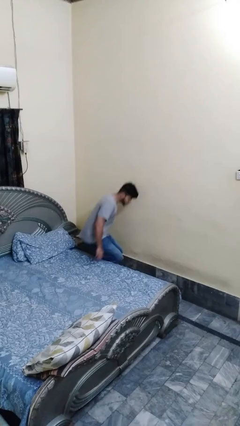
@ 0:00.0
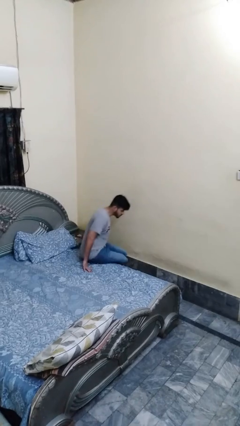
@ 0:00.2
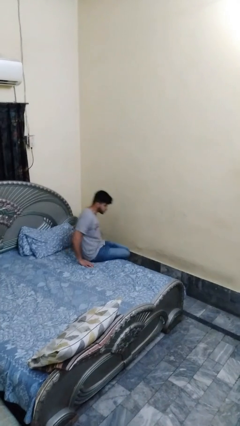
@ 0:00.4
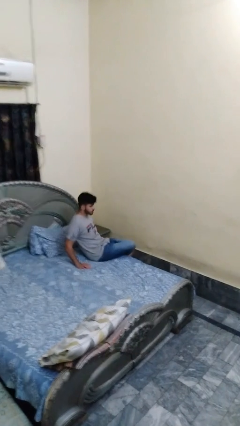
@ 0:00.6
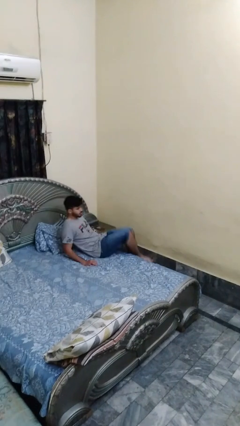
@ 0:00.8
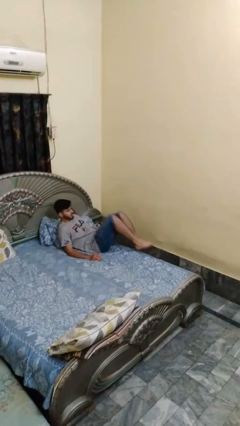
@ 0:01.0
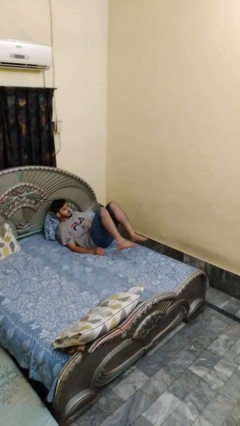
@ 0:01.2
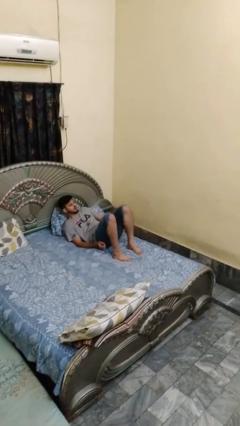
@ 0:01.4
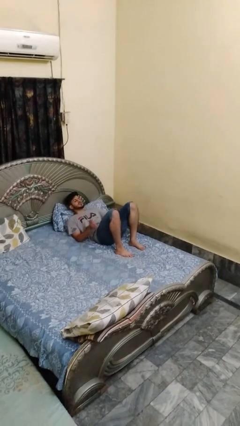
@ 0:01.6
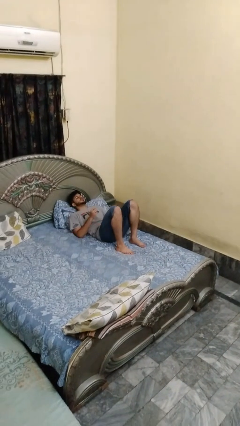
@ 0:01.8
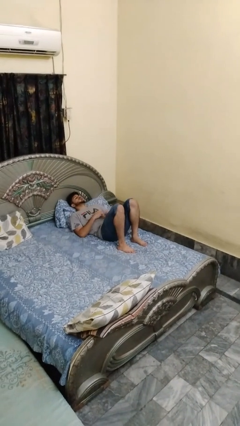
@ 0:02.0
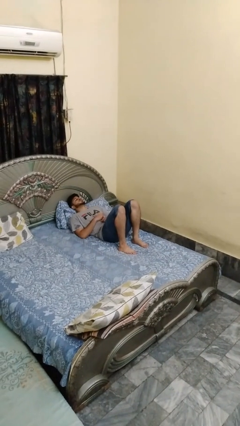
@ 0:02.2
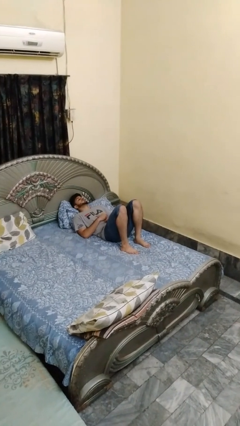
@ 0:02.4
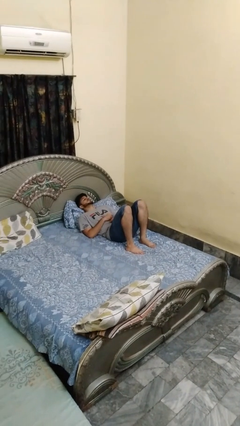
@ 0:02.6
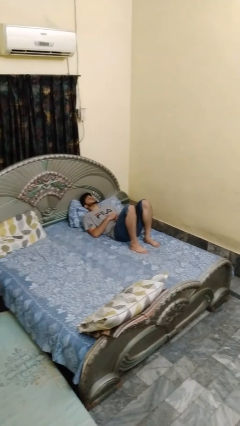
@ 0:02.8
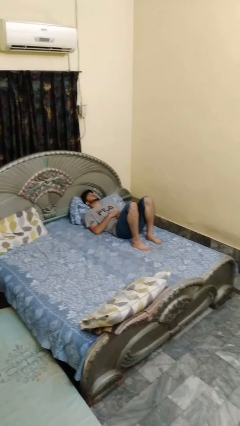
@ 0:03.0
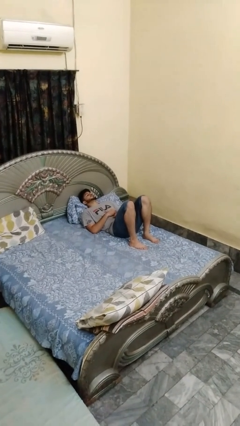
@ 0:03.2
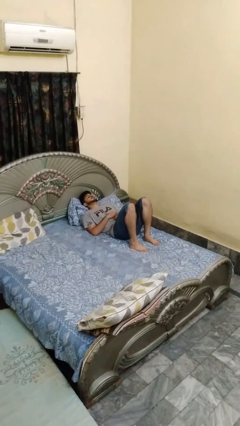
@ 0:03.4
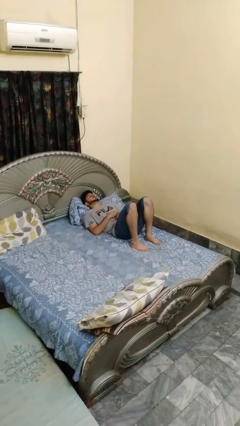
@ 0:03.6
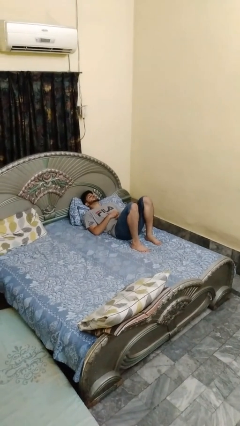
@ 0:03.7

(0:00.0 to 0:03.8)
person lies down on bed

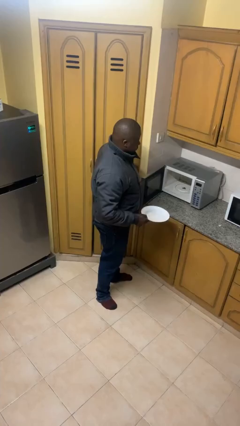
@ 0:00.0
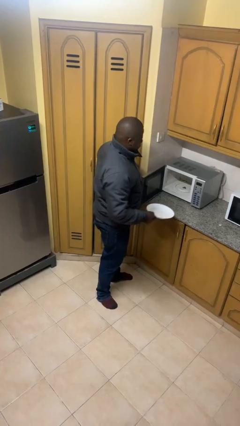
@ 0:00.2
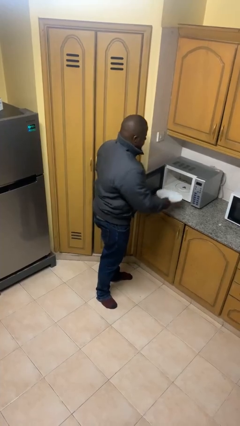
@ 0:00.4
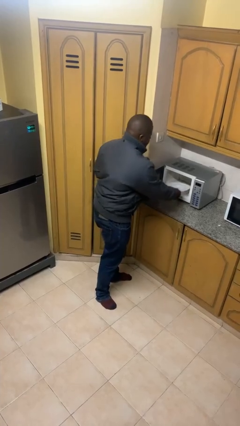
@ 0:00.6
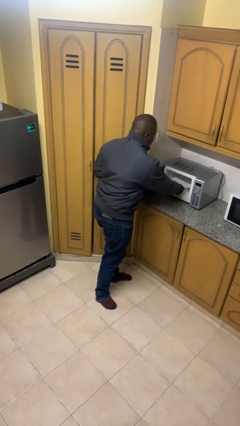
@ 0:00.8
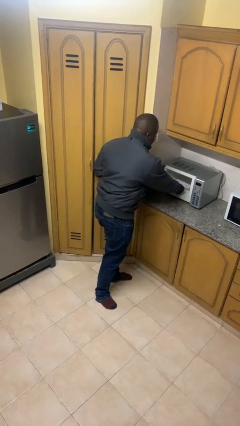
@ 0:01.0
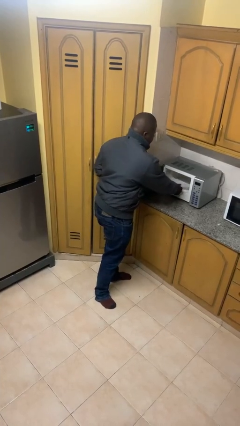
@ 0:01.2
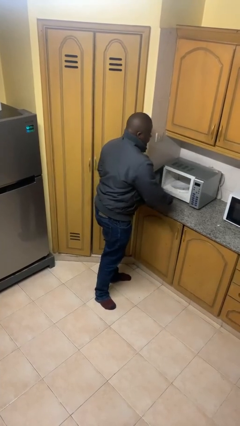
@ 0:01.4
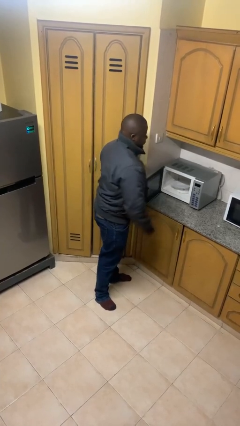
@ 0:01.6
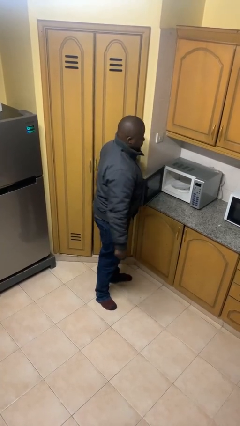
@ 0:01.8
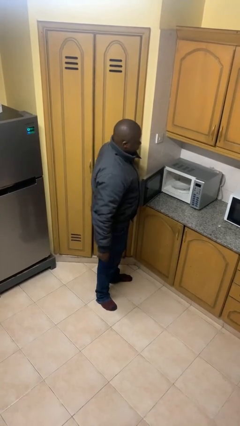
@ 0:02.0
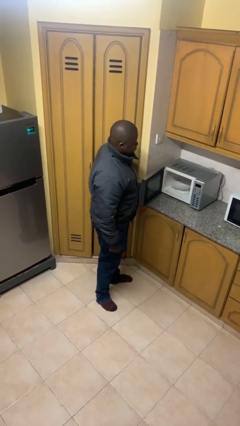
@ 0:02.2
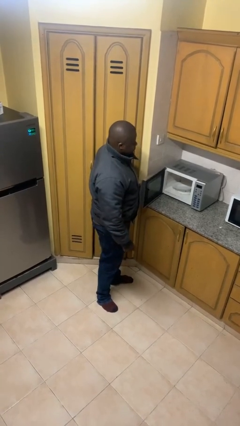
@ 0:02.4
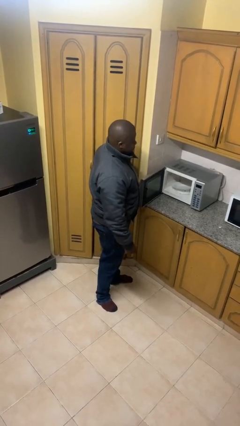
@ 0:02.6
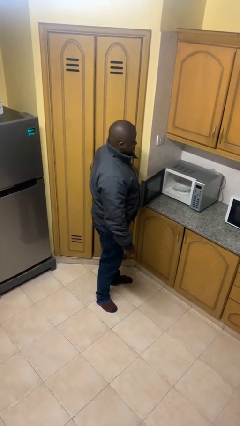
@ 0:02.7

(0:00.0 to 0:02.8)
person puts object into microwave

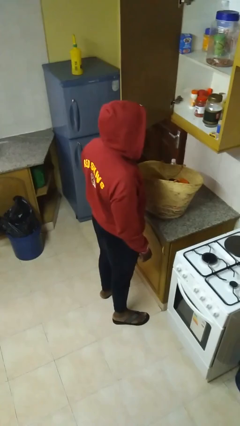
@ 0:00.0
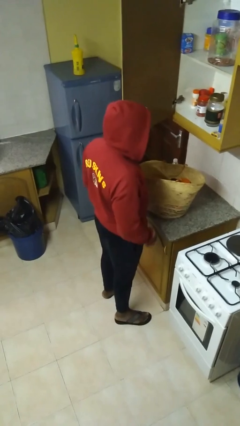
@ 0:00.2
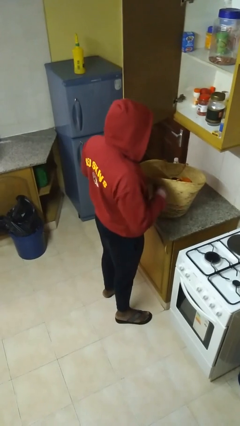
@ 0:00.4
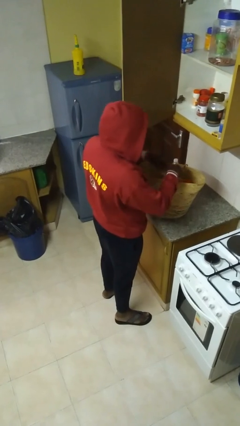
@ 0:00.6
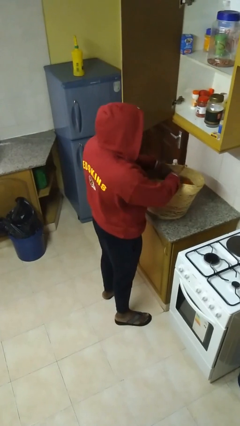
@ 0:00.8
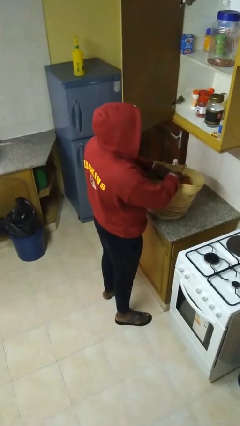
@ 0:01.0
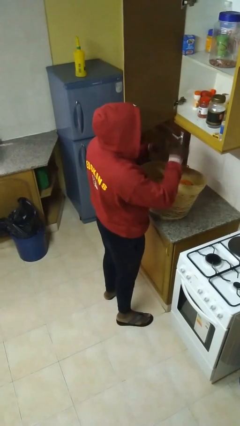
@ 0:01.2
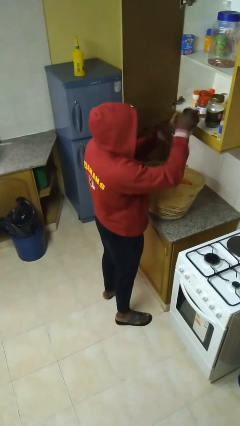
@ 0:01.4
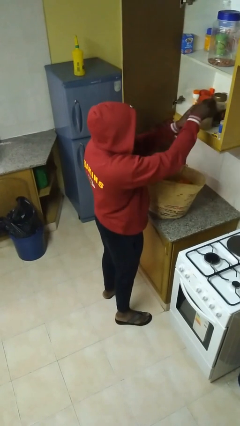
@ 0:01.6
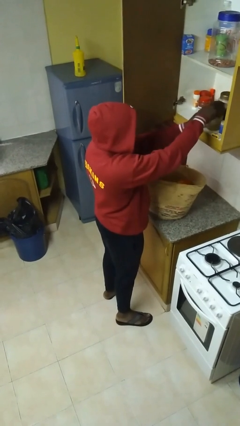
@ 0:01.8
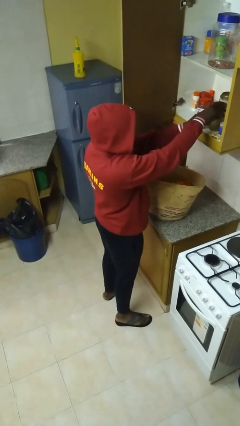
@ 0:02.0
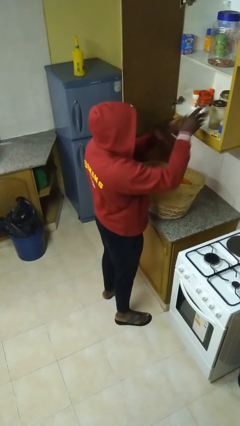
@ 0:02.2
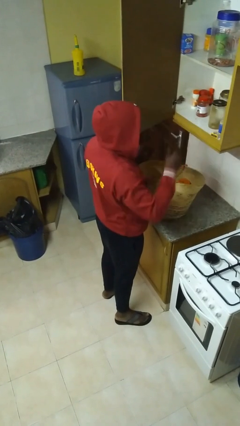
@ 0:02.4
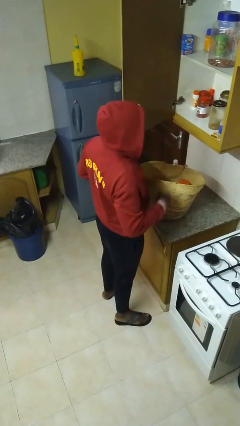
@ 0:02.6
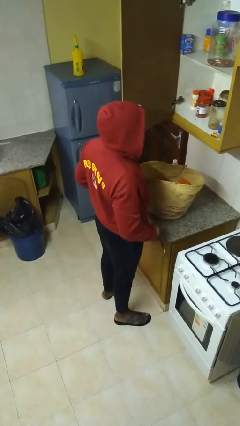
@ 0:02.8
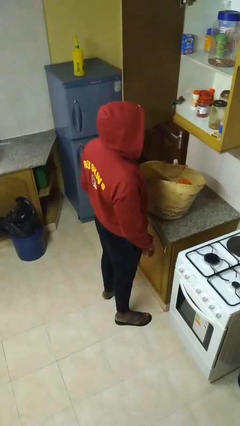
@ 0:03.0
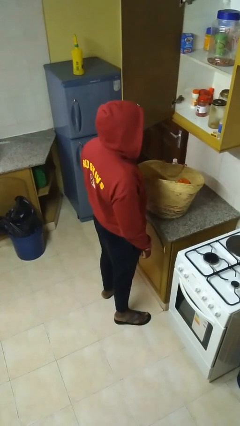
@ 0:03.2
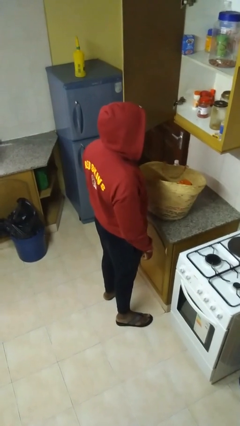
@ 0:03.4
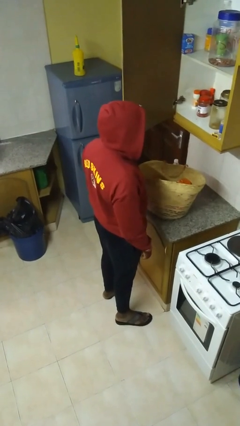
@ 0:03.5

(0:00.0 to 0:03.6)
person loads groceries into cabinet

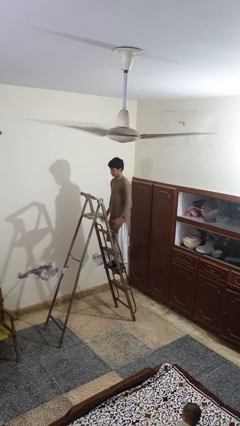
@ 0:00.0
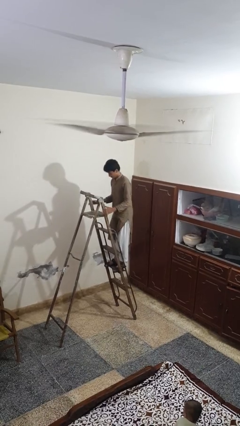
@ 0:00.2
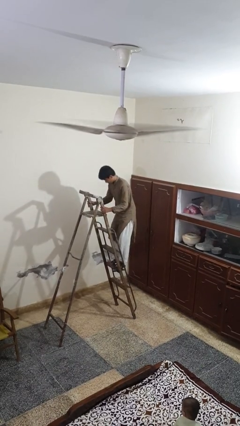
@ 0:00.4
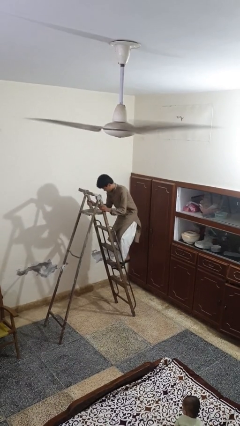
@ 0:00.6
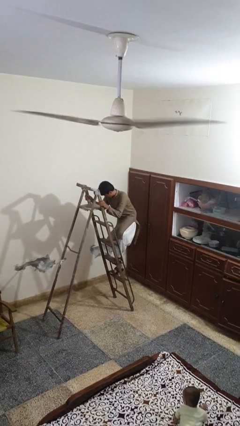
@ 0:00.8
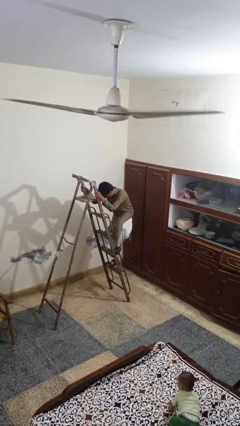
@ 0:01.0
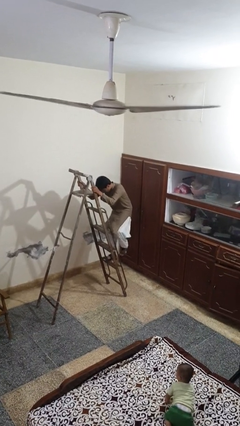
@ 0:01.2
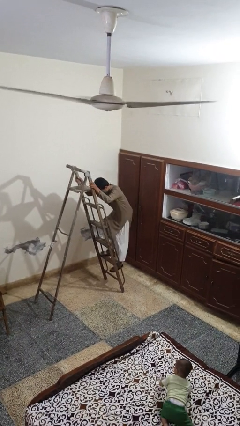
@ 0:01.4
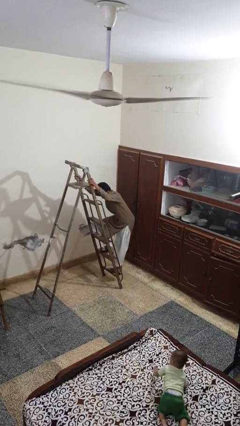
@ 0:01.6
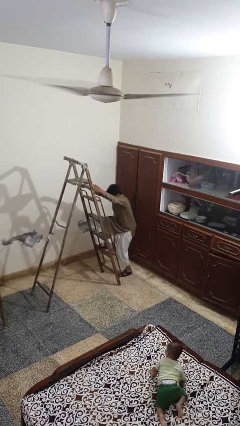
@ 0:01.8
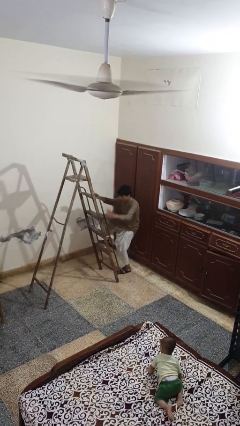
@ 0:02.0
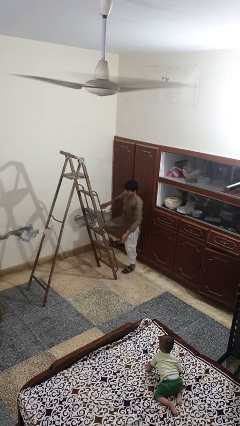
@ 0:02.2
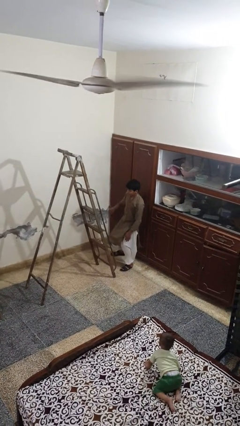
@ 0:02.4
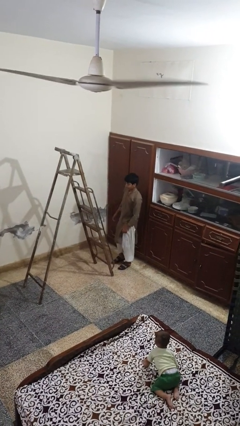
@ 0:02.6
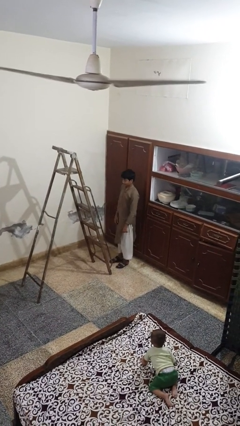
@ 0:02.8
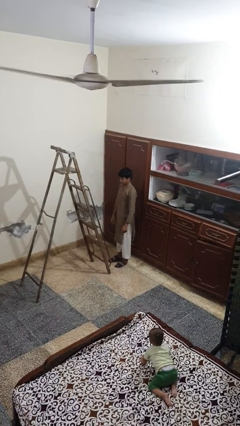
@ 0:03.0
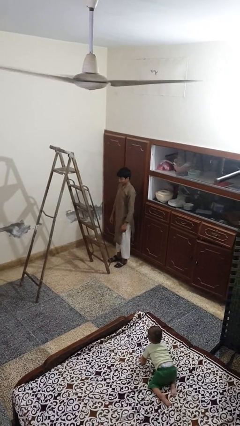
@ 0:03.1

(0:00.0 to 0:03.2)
person climbs down ladder

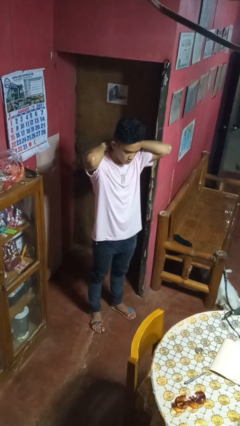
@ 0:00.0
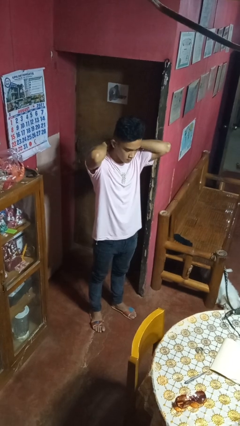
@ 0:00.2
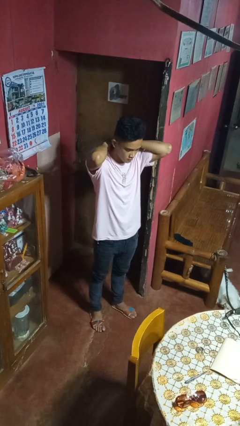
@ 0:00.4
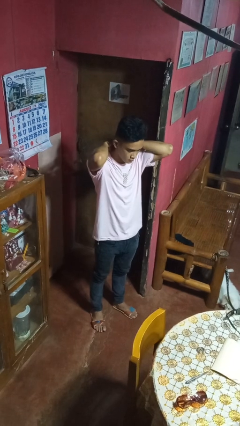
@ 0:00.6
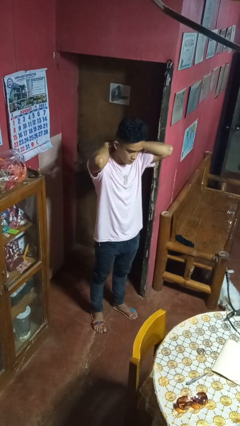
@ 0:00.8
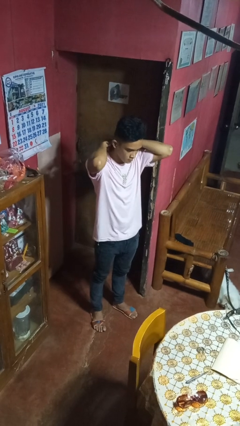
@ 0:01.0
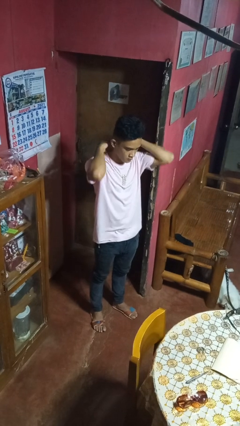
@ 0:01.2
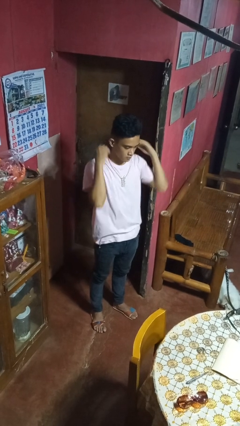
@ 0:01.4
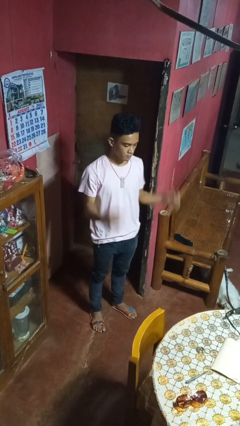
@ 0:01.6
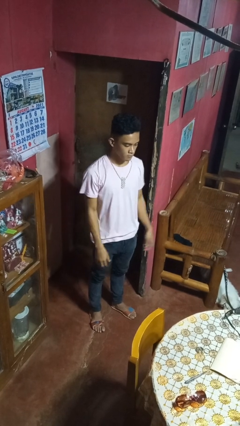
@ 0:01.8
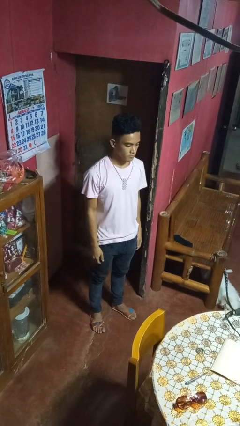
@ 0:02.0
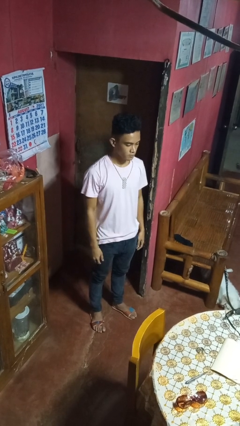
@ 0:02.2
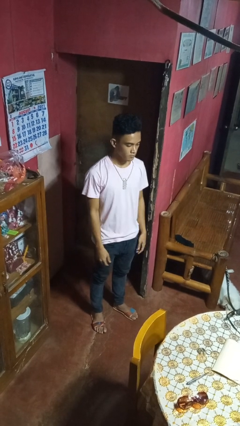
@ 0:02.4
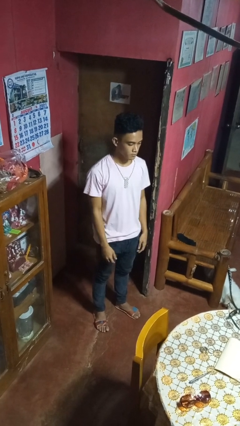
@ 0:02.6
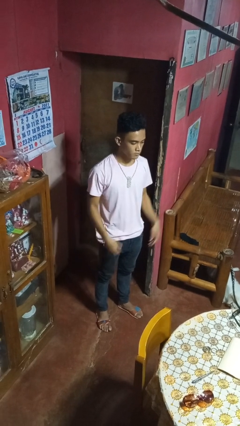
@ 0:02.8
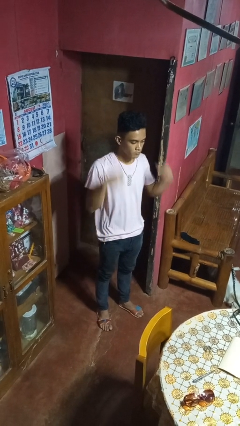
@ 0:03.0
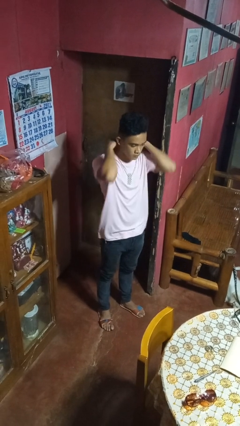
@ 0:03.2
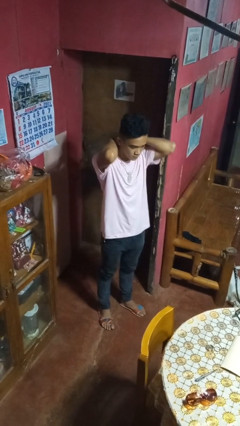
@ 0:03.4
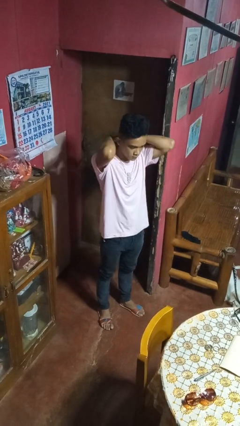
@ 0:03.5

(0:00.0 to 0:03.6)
person puts on necklace
